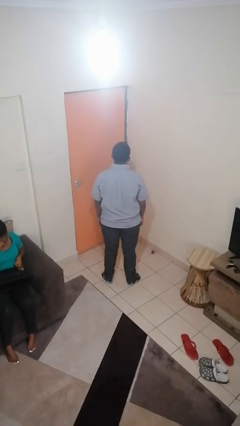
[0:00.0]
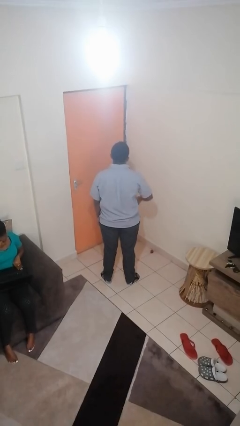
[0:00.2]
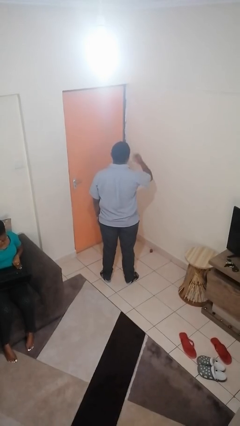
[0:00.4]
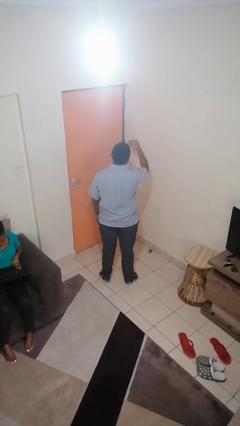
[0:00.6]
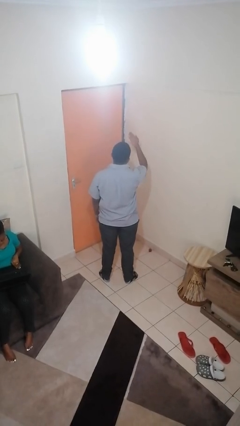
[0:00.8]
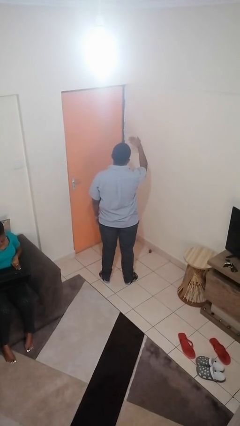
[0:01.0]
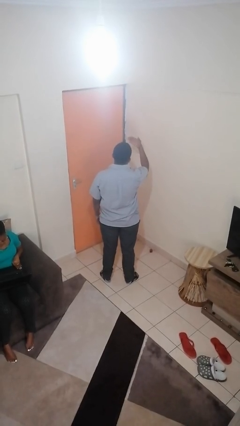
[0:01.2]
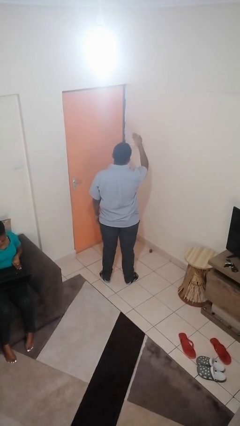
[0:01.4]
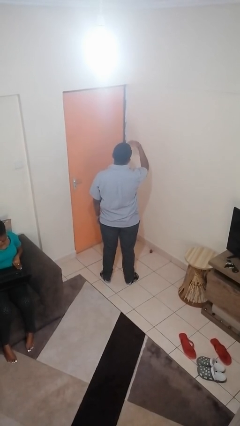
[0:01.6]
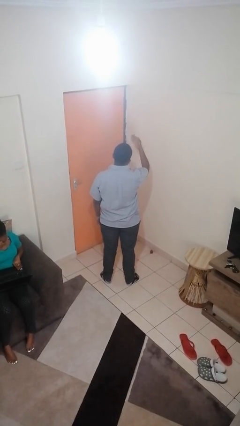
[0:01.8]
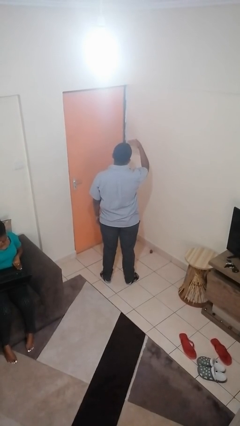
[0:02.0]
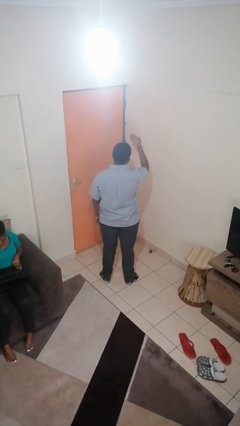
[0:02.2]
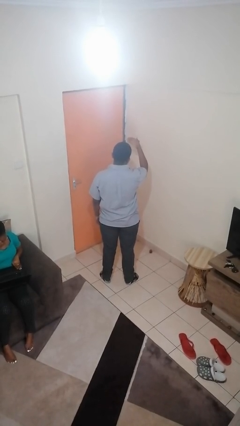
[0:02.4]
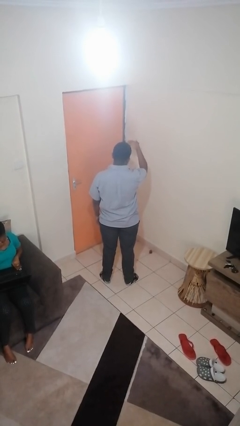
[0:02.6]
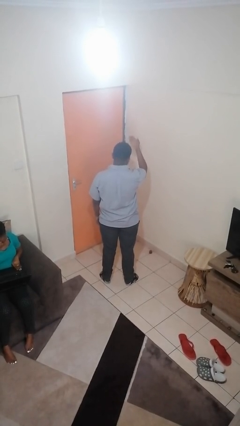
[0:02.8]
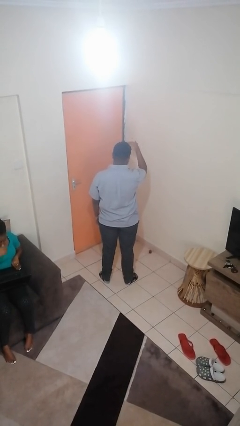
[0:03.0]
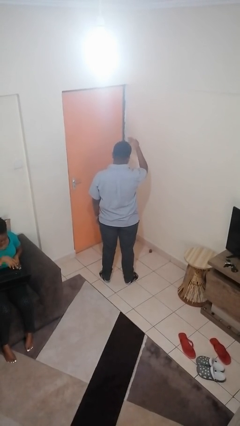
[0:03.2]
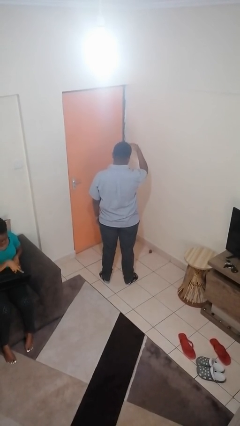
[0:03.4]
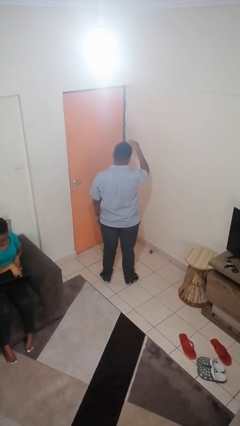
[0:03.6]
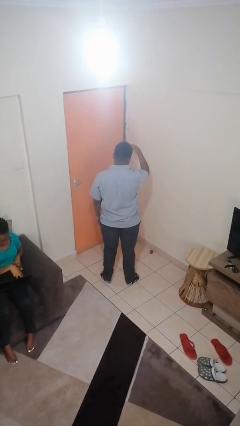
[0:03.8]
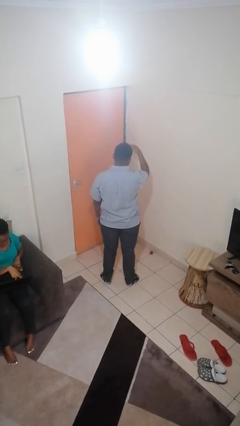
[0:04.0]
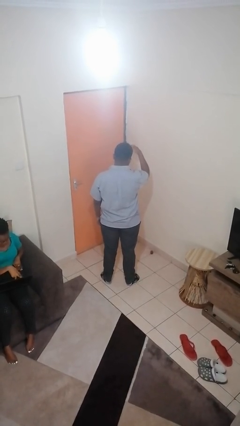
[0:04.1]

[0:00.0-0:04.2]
person gestures come here

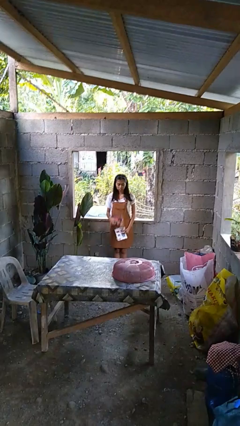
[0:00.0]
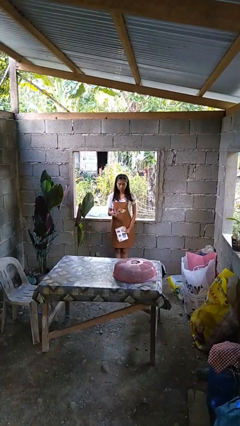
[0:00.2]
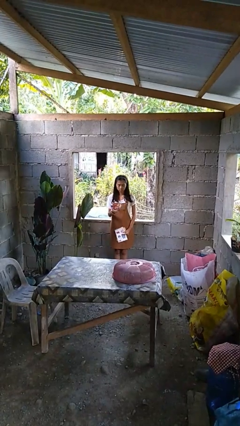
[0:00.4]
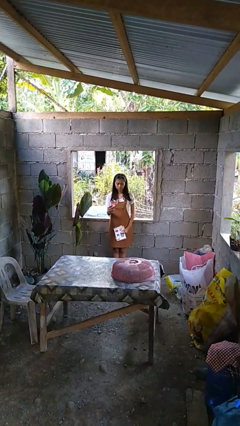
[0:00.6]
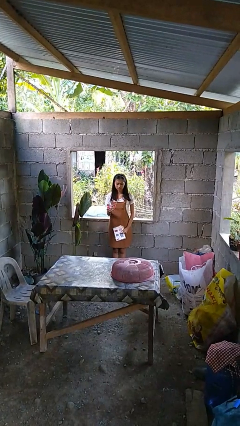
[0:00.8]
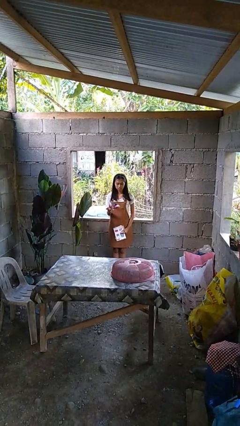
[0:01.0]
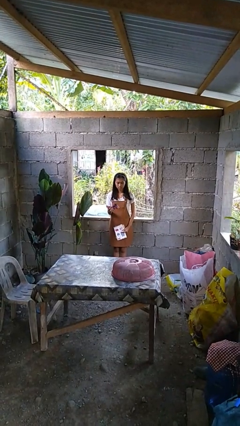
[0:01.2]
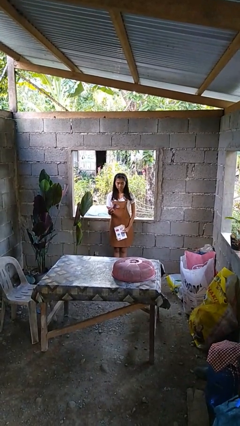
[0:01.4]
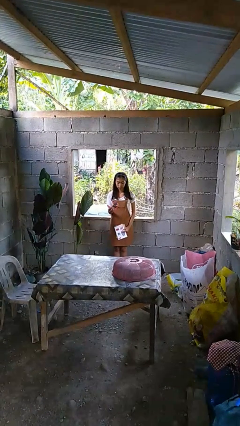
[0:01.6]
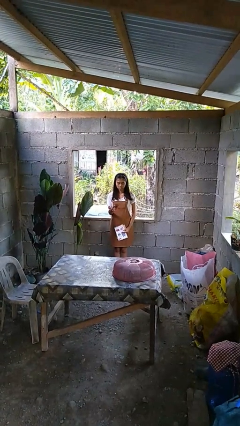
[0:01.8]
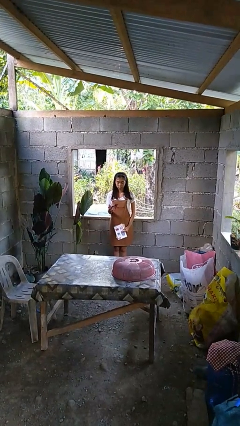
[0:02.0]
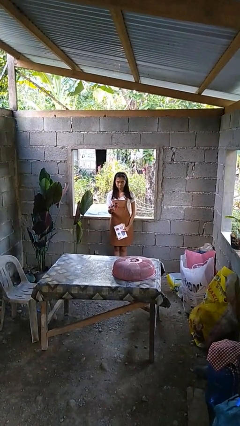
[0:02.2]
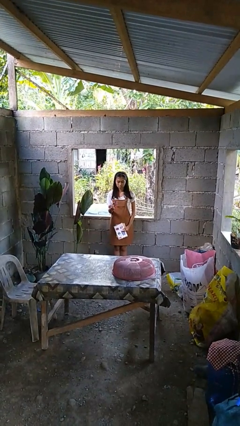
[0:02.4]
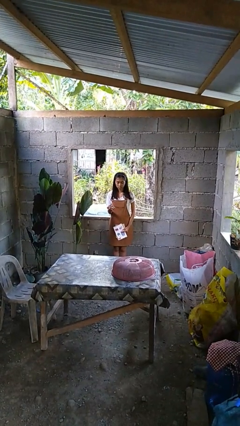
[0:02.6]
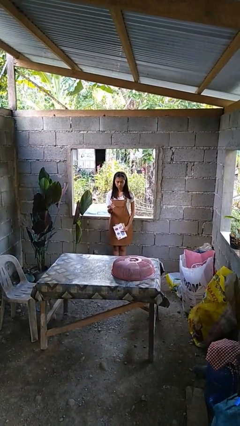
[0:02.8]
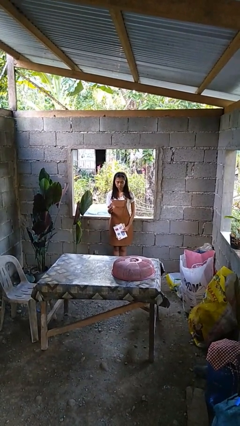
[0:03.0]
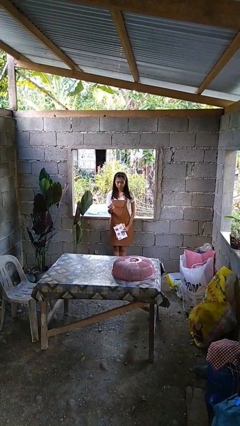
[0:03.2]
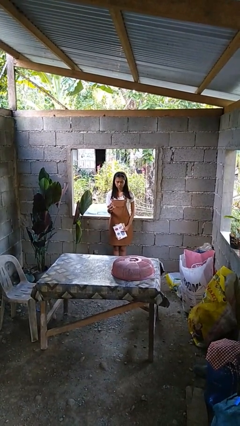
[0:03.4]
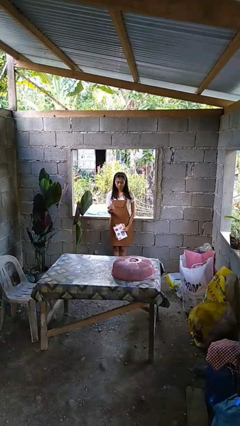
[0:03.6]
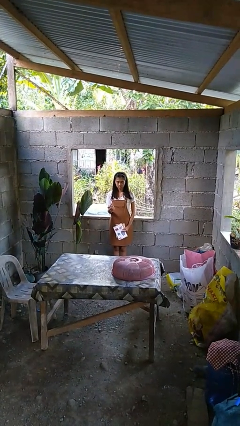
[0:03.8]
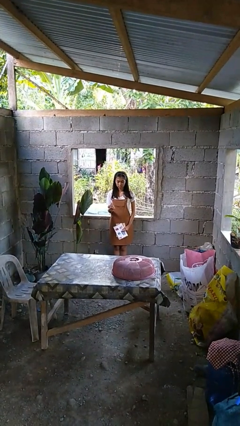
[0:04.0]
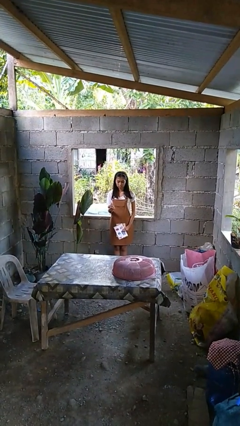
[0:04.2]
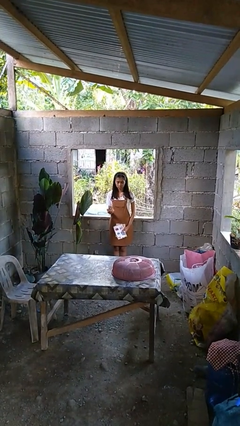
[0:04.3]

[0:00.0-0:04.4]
person crumples paper

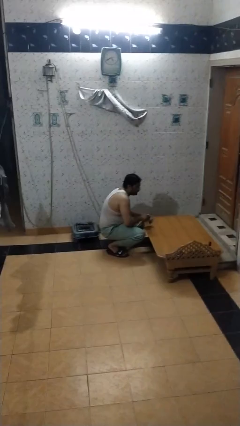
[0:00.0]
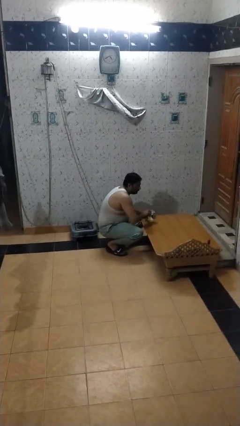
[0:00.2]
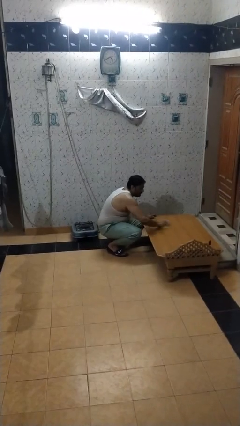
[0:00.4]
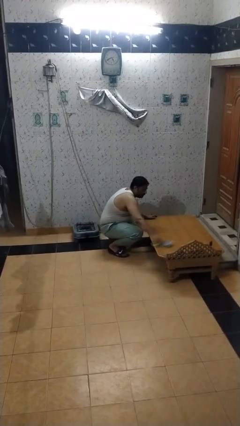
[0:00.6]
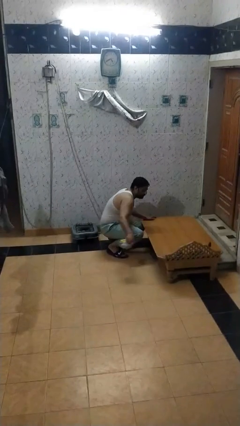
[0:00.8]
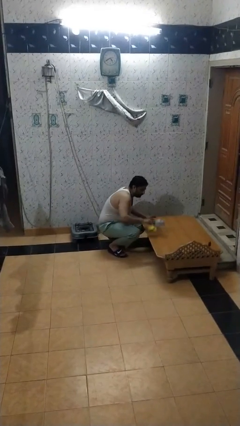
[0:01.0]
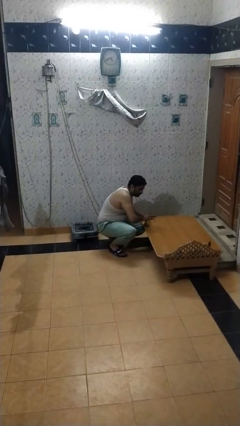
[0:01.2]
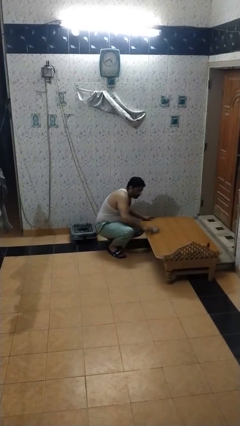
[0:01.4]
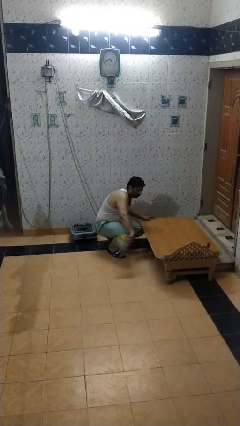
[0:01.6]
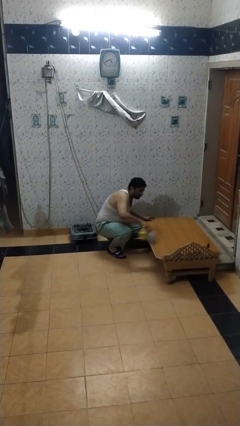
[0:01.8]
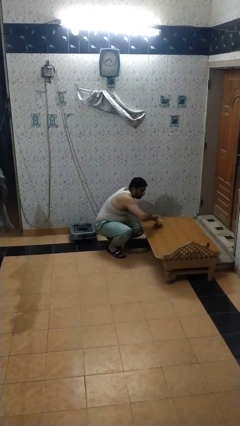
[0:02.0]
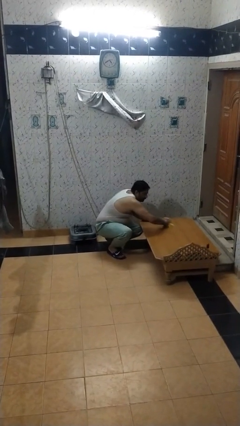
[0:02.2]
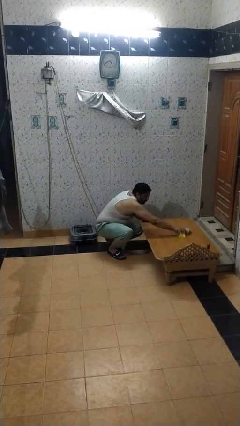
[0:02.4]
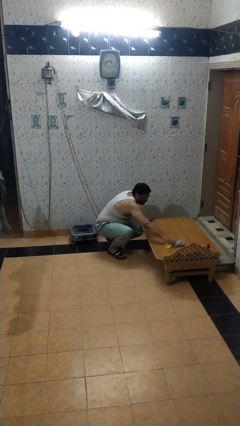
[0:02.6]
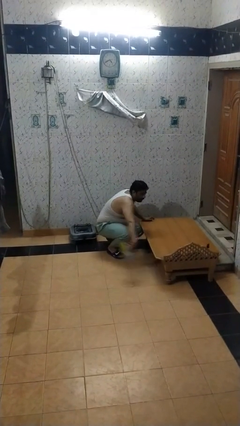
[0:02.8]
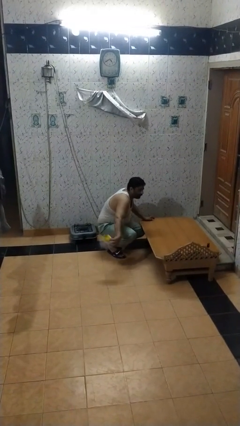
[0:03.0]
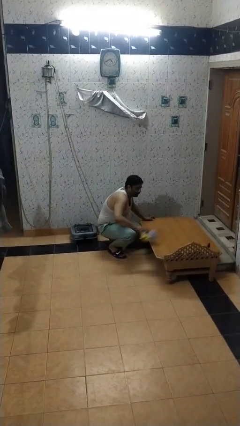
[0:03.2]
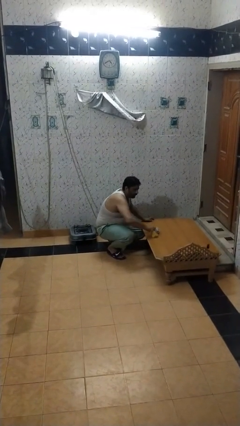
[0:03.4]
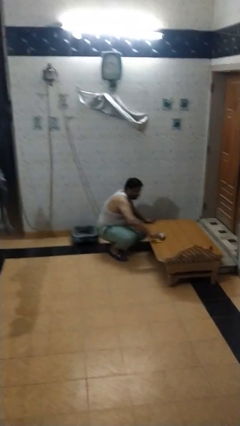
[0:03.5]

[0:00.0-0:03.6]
person cleans table with rag

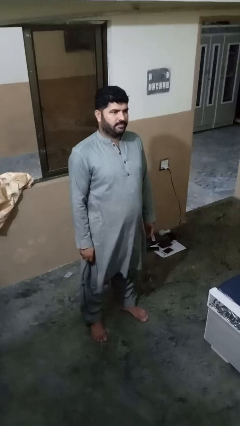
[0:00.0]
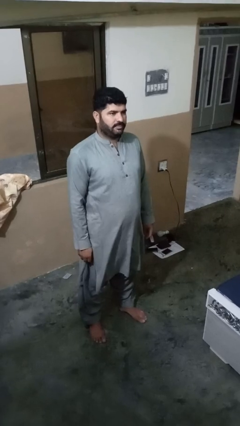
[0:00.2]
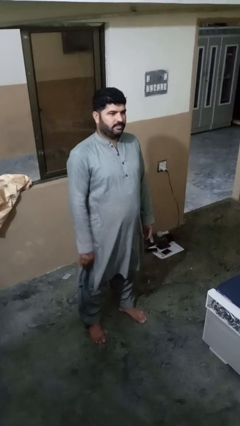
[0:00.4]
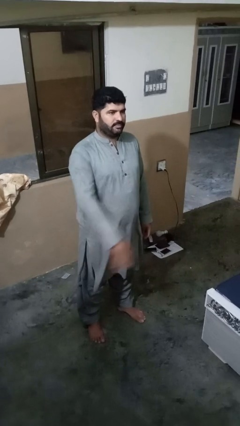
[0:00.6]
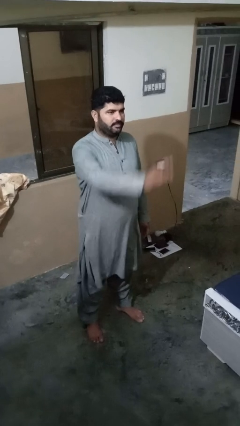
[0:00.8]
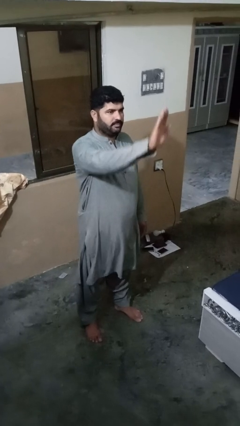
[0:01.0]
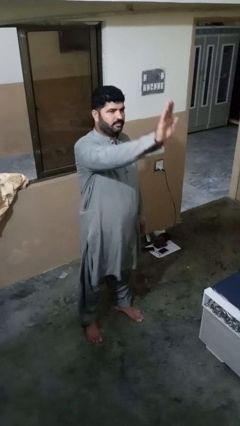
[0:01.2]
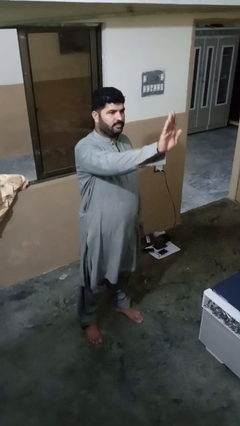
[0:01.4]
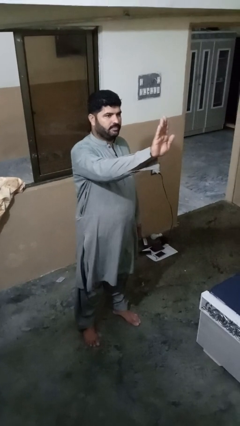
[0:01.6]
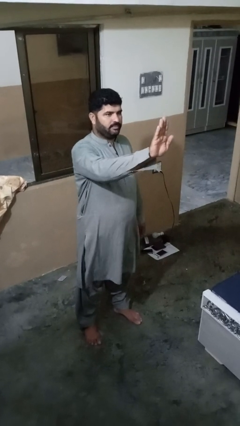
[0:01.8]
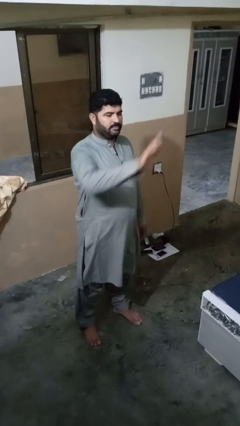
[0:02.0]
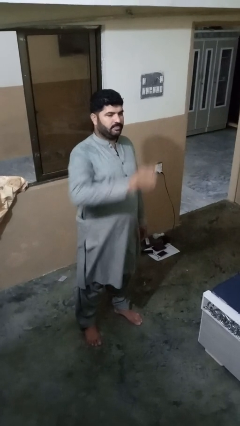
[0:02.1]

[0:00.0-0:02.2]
person gestures stop

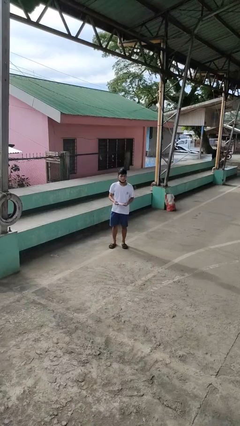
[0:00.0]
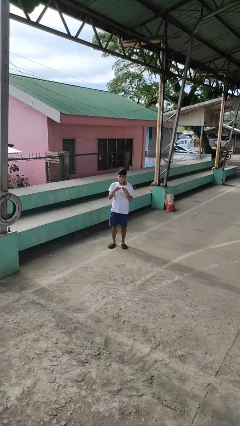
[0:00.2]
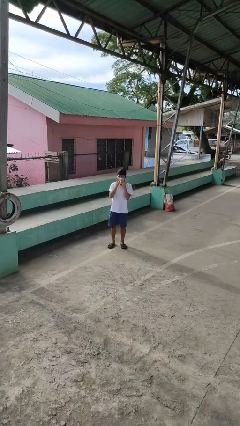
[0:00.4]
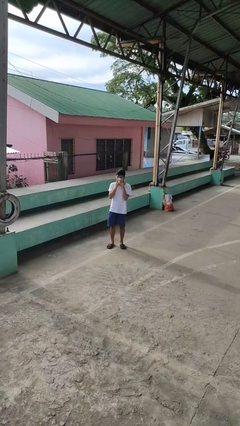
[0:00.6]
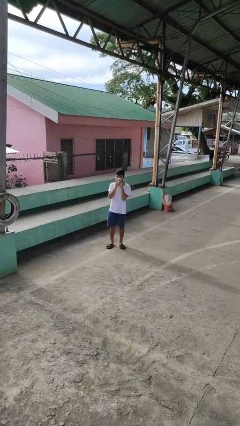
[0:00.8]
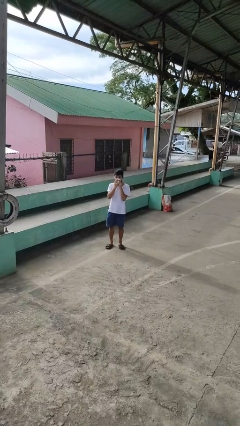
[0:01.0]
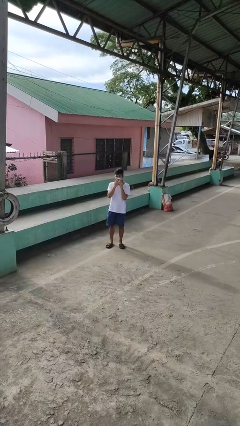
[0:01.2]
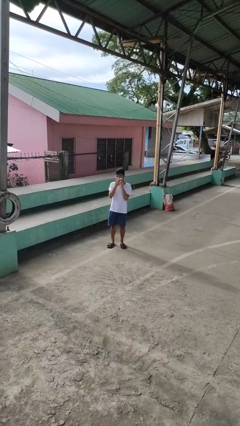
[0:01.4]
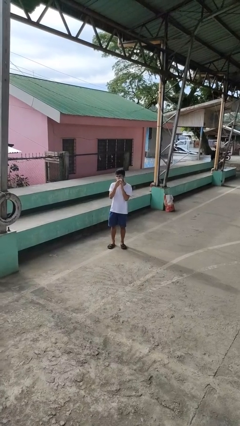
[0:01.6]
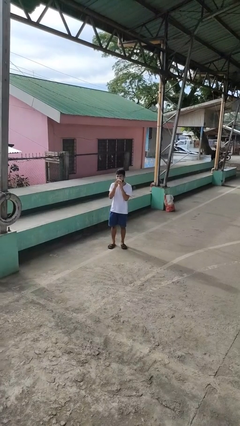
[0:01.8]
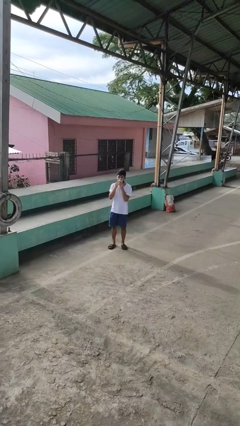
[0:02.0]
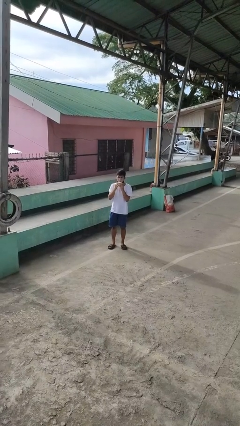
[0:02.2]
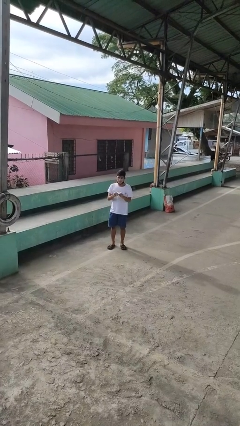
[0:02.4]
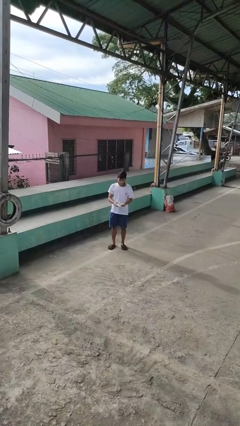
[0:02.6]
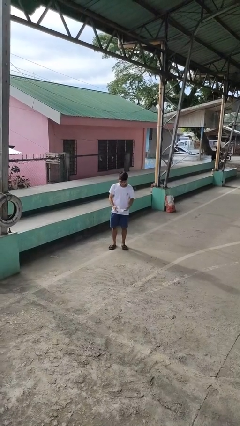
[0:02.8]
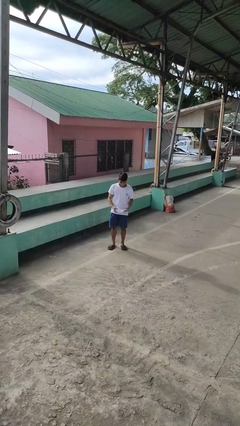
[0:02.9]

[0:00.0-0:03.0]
person wipes mouth with napkin

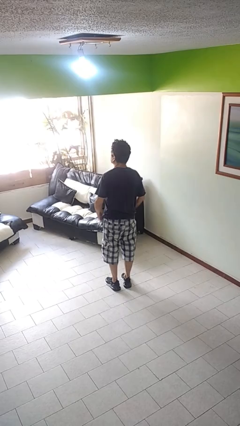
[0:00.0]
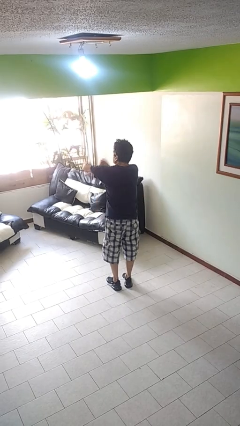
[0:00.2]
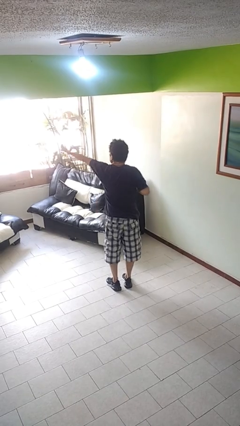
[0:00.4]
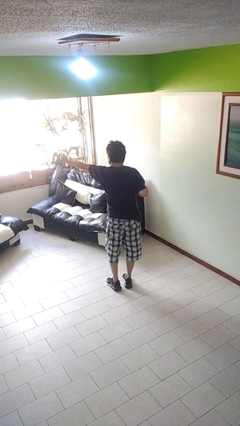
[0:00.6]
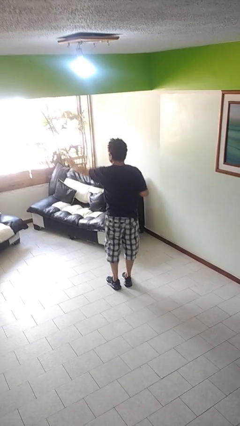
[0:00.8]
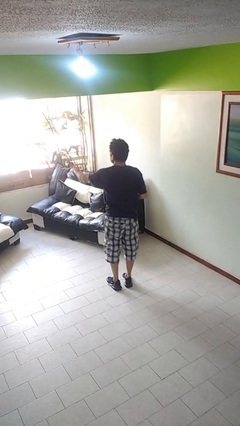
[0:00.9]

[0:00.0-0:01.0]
person karate chop
